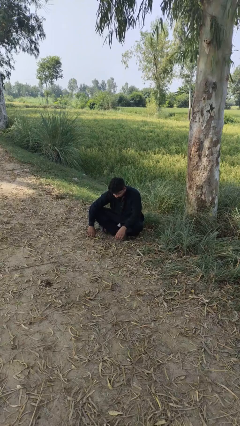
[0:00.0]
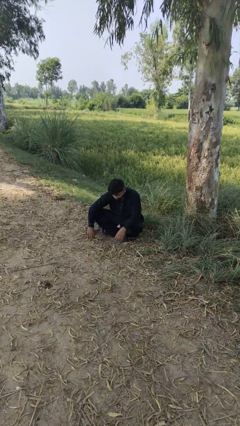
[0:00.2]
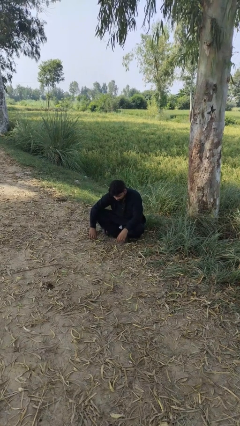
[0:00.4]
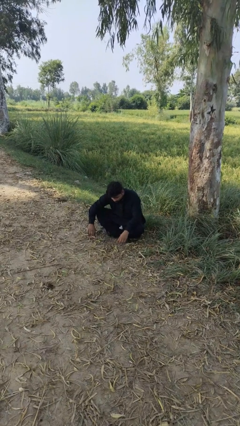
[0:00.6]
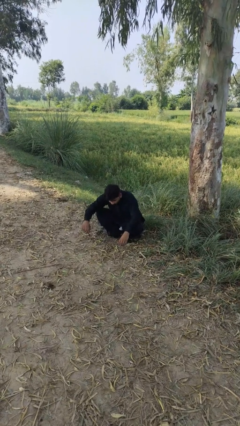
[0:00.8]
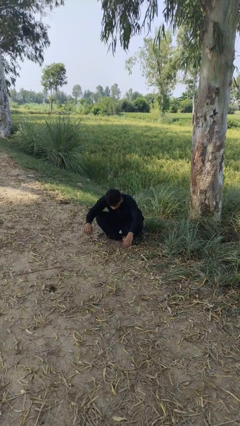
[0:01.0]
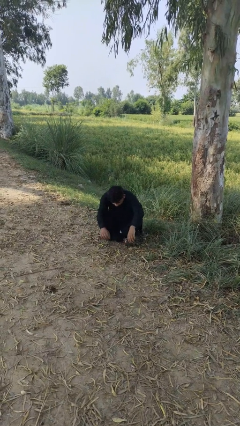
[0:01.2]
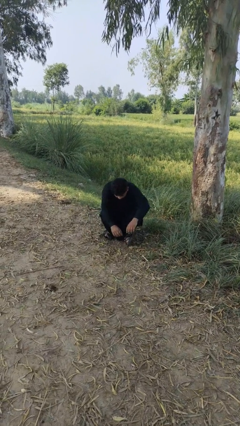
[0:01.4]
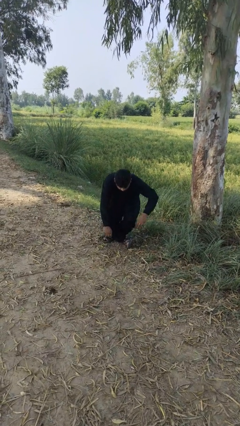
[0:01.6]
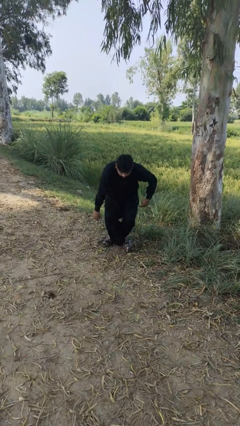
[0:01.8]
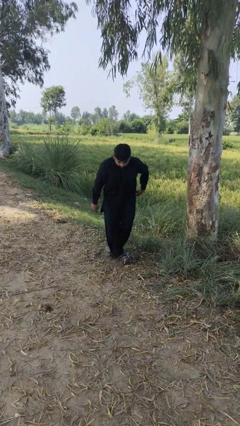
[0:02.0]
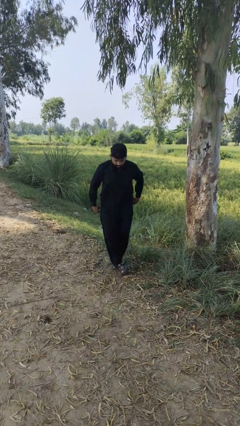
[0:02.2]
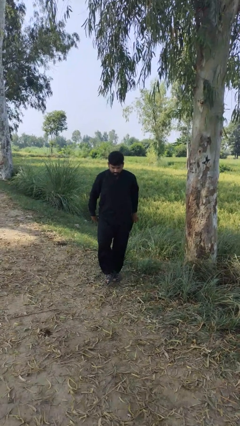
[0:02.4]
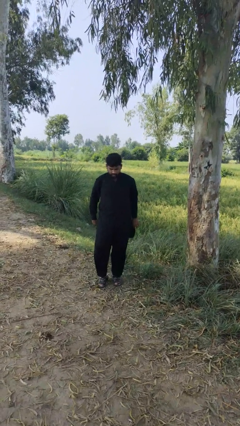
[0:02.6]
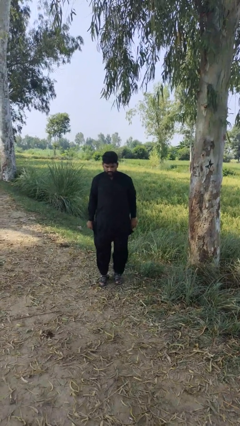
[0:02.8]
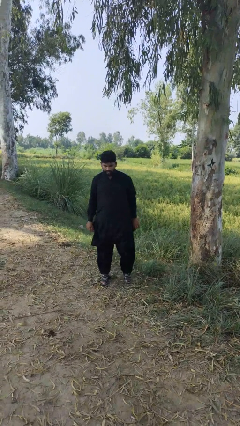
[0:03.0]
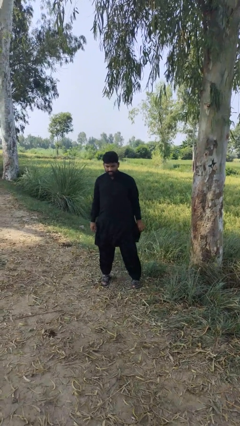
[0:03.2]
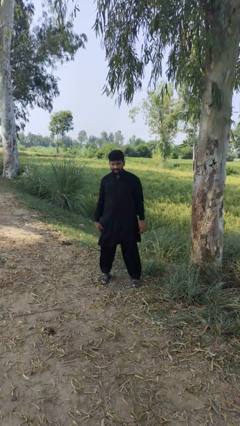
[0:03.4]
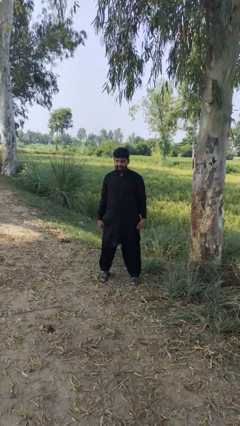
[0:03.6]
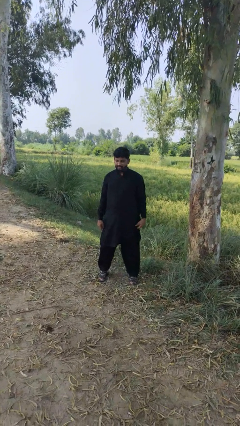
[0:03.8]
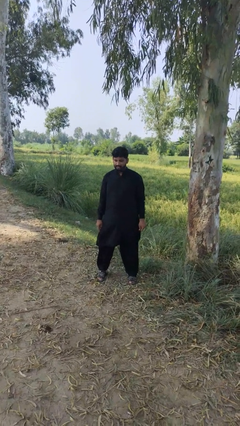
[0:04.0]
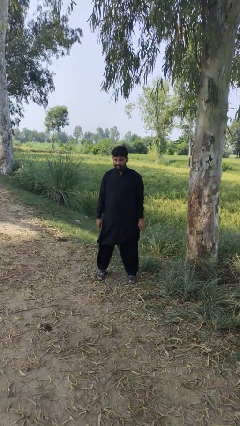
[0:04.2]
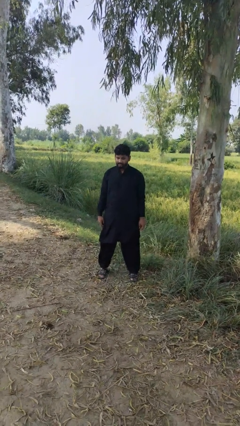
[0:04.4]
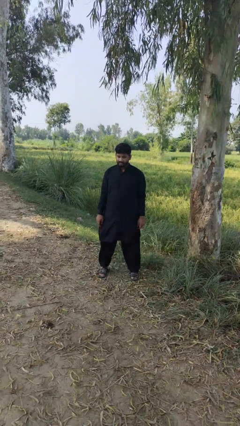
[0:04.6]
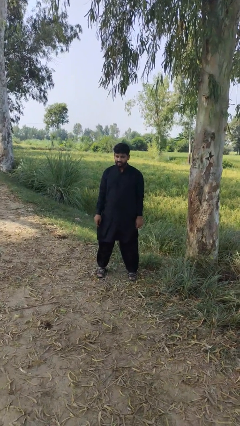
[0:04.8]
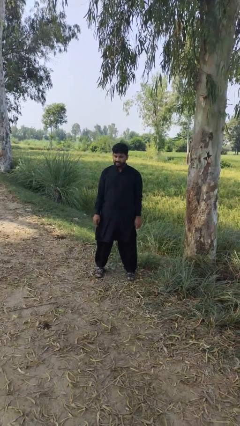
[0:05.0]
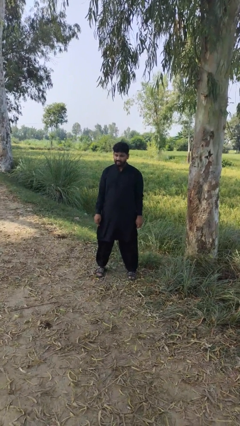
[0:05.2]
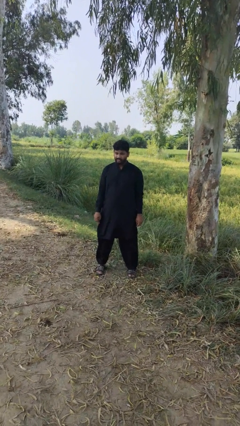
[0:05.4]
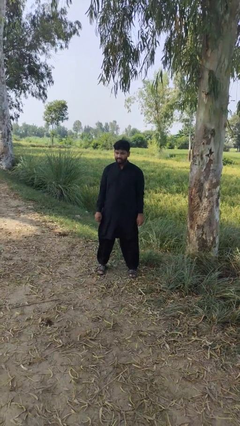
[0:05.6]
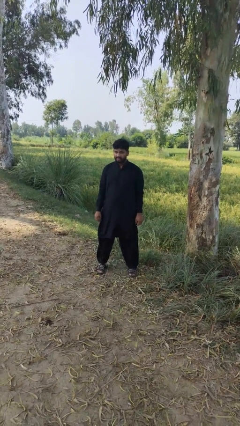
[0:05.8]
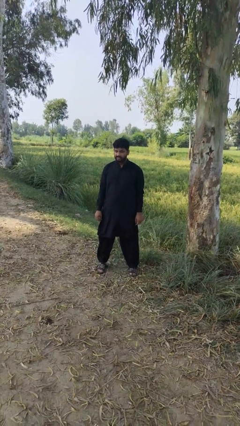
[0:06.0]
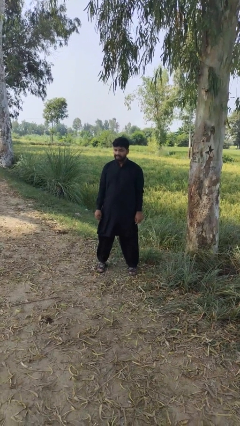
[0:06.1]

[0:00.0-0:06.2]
person stands up from floor

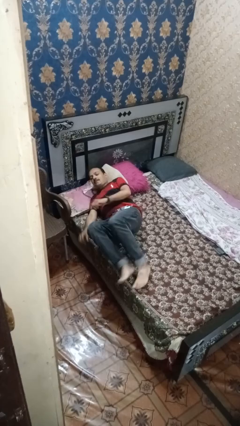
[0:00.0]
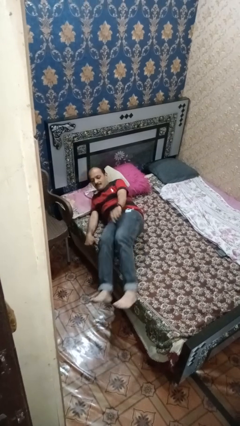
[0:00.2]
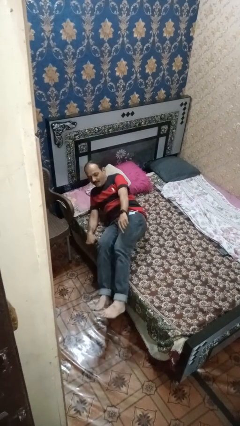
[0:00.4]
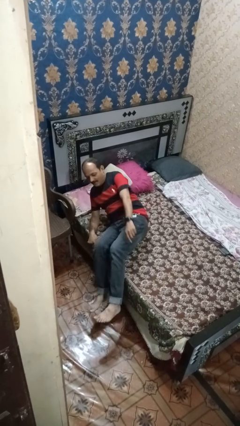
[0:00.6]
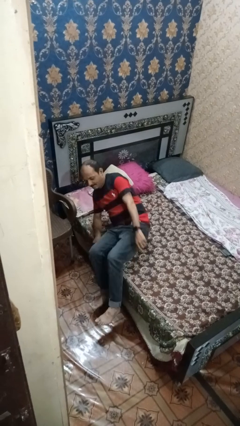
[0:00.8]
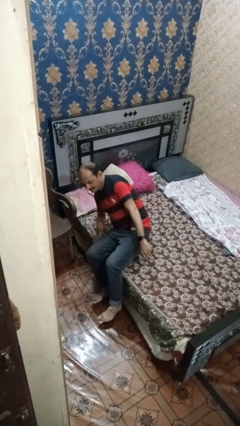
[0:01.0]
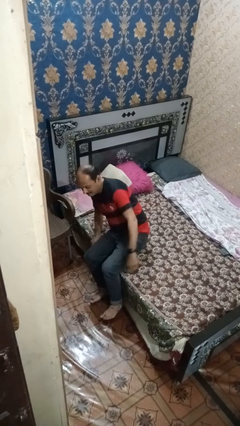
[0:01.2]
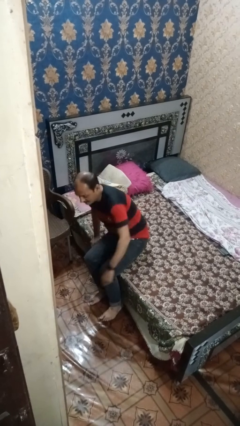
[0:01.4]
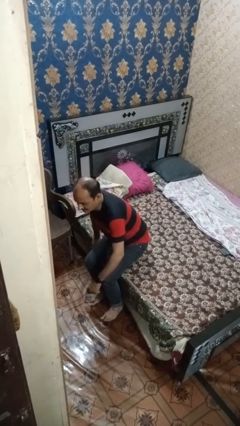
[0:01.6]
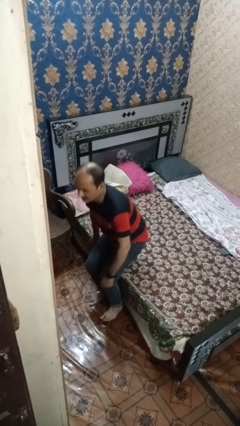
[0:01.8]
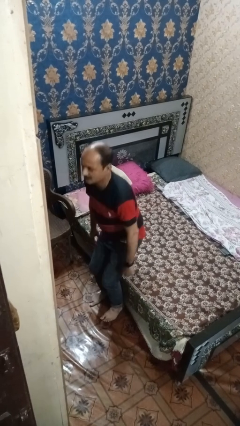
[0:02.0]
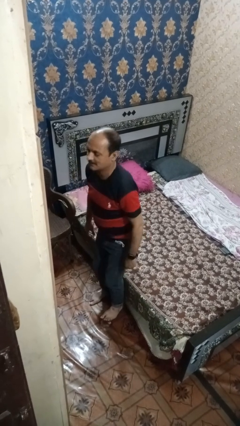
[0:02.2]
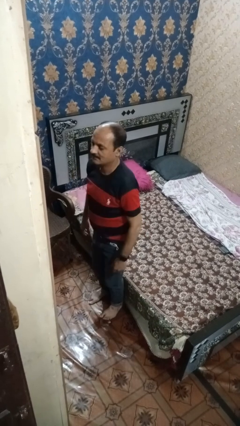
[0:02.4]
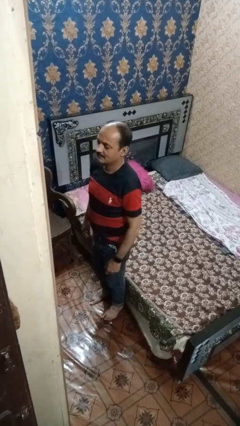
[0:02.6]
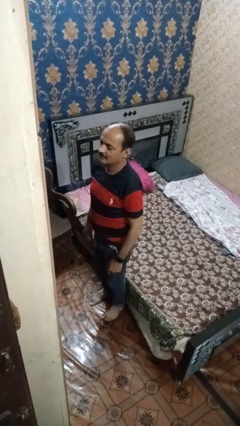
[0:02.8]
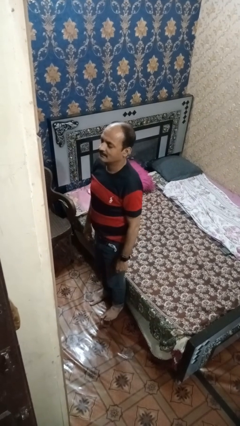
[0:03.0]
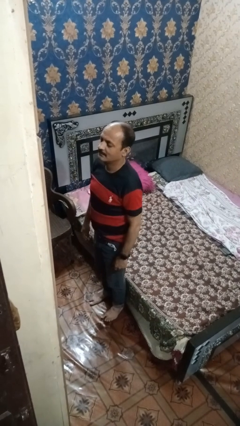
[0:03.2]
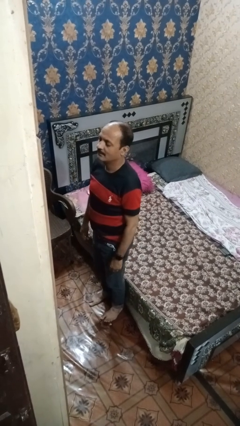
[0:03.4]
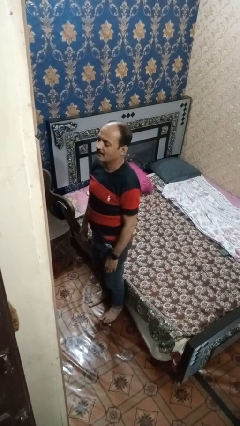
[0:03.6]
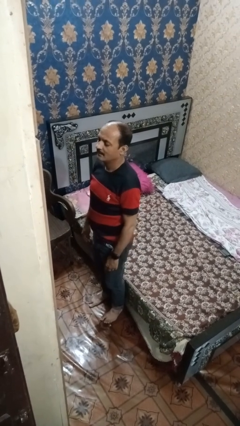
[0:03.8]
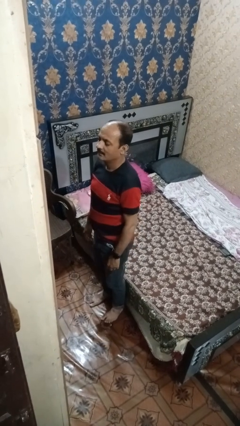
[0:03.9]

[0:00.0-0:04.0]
person stands up

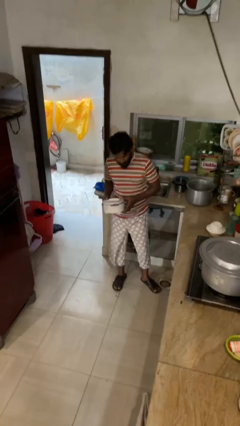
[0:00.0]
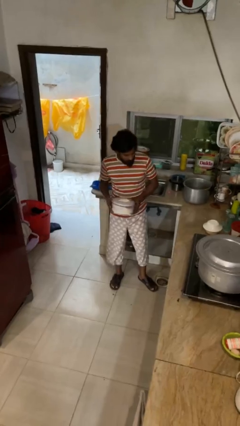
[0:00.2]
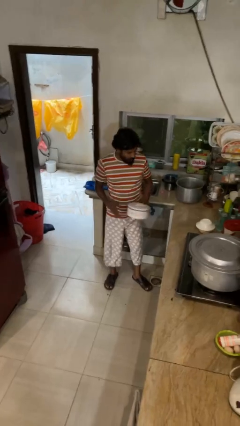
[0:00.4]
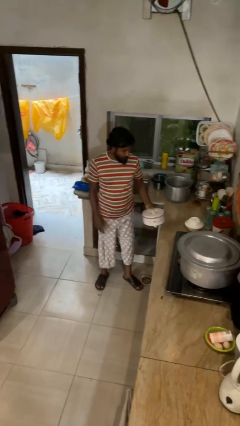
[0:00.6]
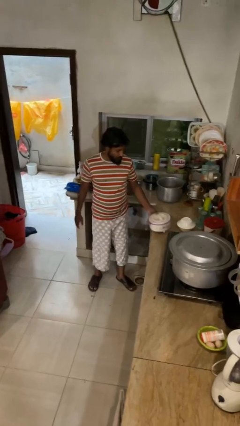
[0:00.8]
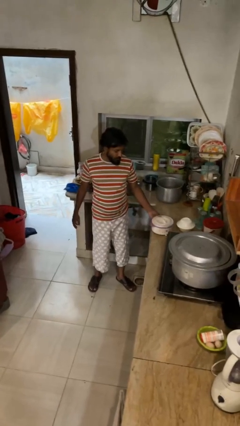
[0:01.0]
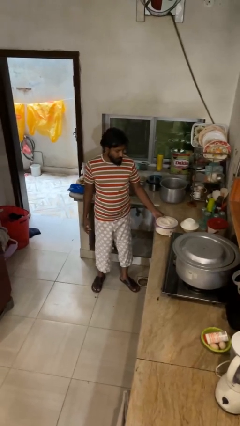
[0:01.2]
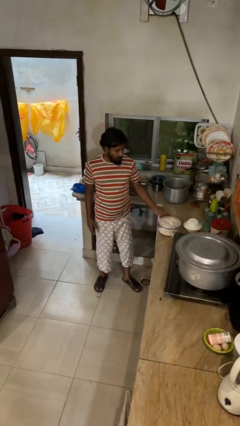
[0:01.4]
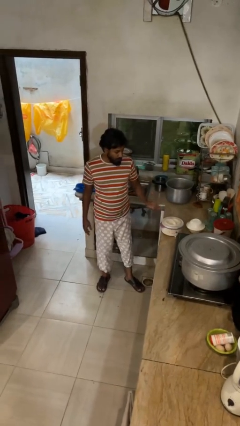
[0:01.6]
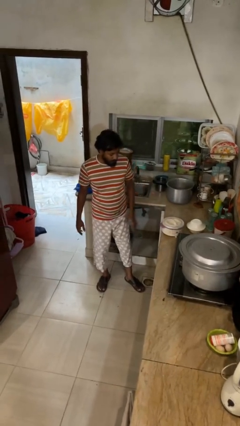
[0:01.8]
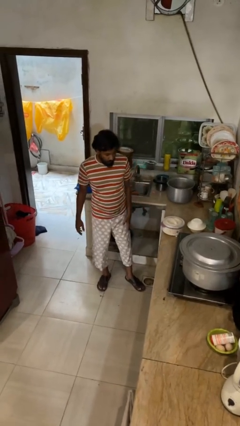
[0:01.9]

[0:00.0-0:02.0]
person puts down object on countertop

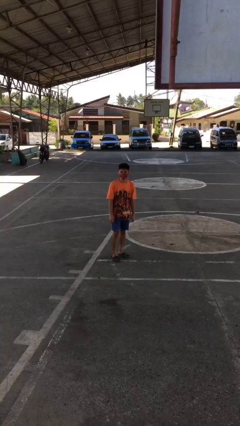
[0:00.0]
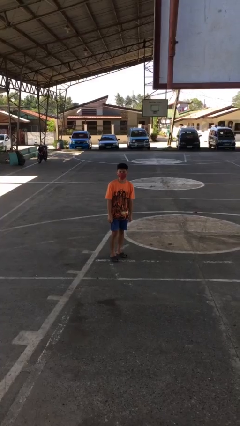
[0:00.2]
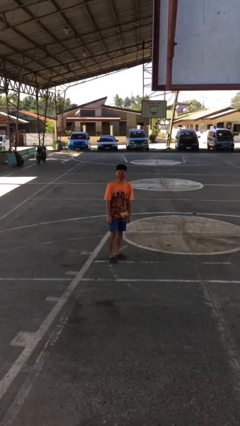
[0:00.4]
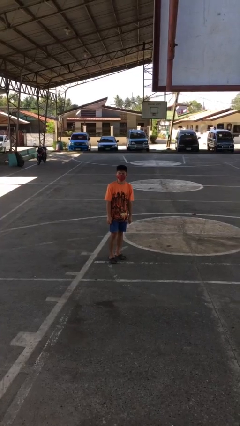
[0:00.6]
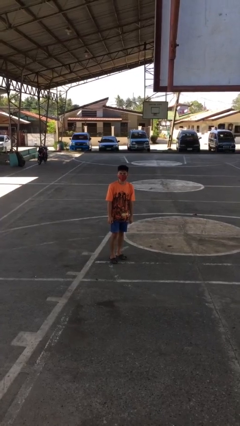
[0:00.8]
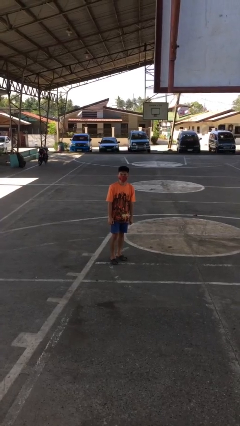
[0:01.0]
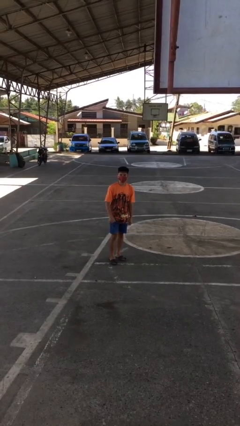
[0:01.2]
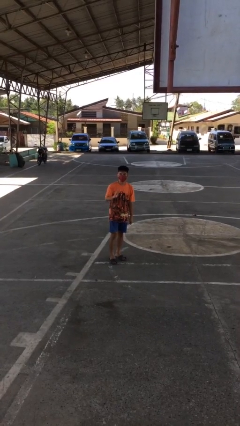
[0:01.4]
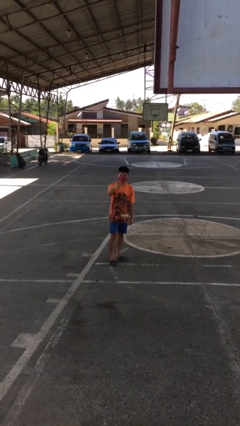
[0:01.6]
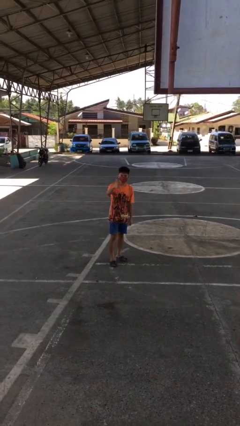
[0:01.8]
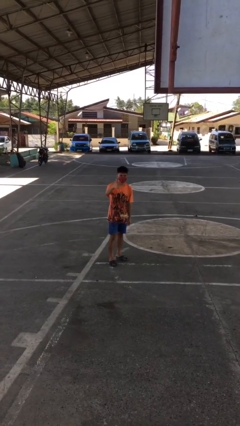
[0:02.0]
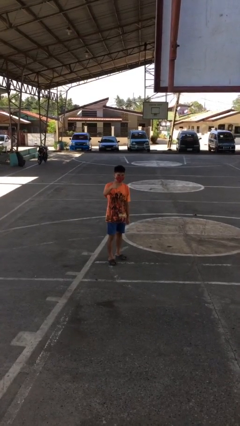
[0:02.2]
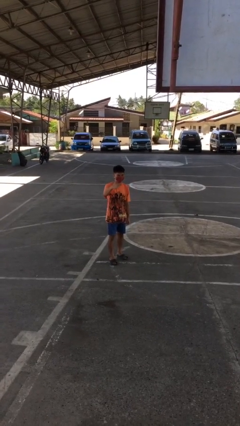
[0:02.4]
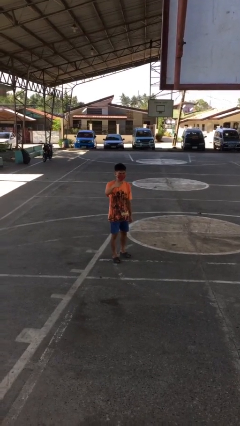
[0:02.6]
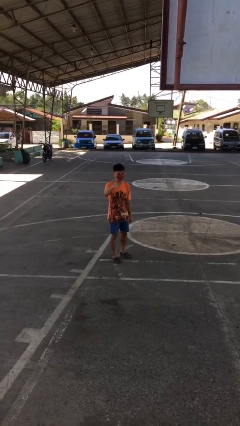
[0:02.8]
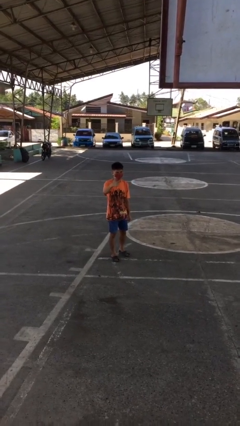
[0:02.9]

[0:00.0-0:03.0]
person gestures thumbs up

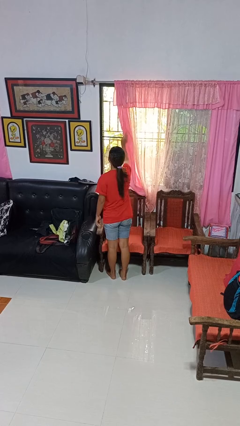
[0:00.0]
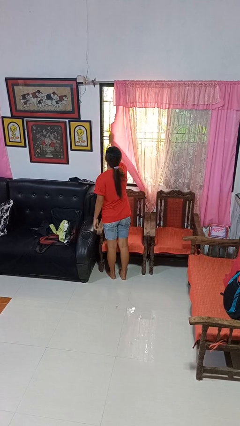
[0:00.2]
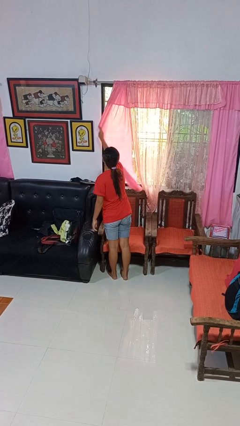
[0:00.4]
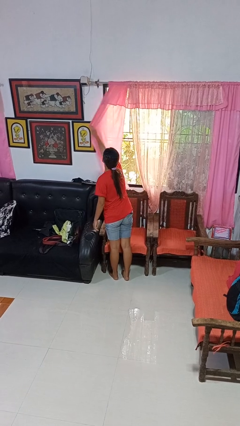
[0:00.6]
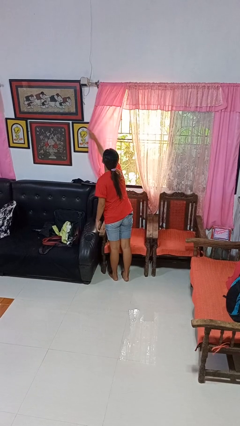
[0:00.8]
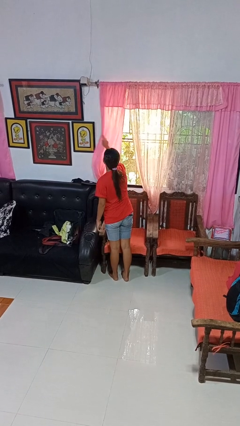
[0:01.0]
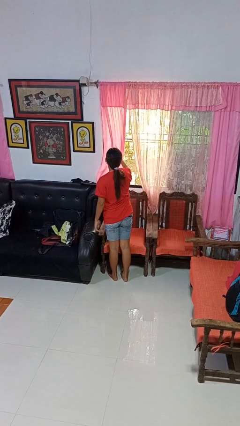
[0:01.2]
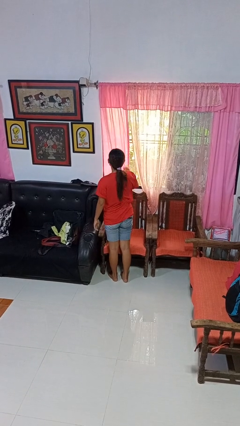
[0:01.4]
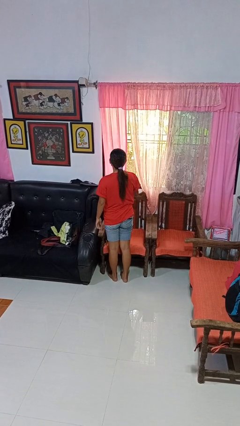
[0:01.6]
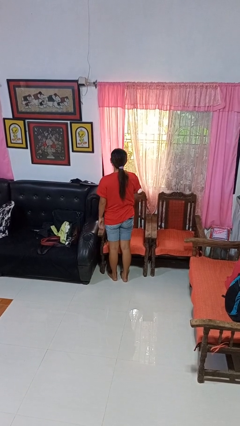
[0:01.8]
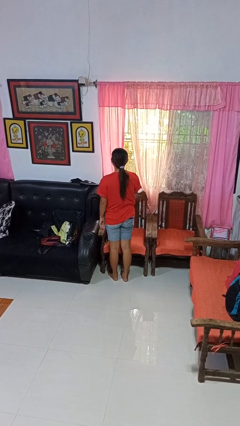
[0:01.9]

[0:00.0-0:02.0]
person closes curtains

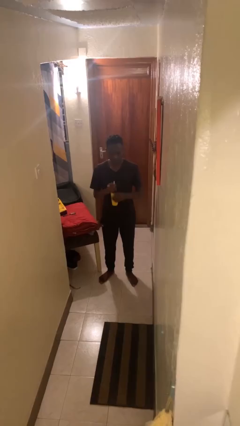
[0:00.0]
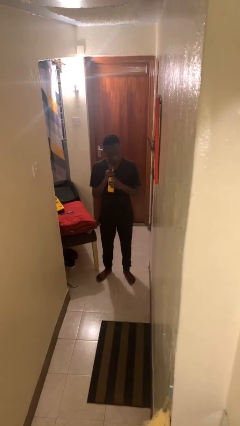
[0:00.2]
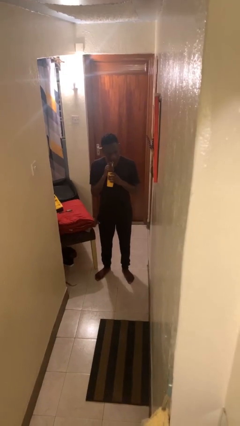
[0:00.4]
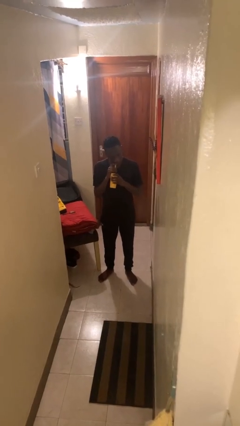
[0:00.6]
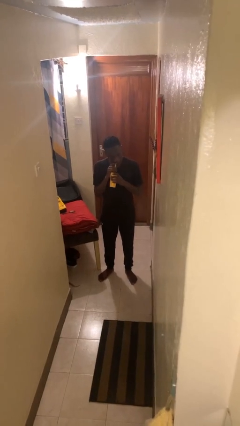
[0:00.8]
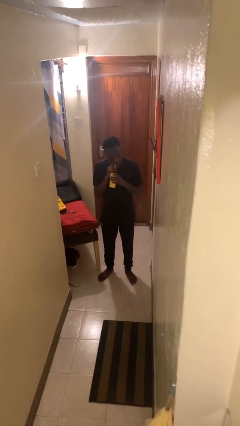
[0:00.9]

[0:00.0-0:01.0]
person drinks from straw
